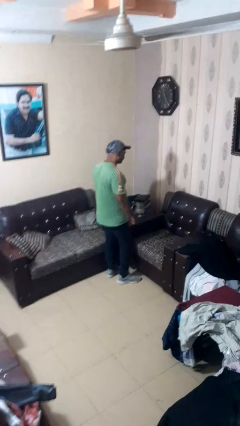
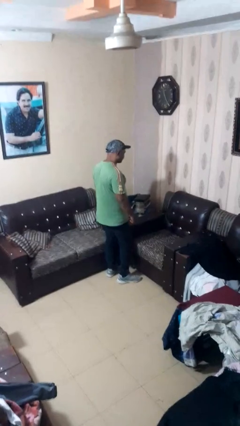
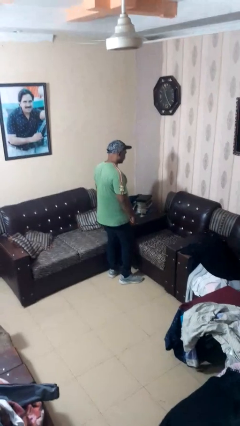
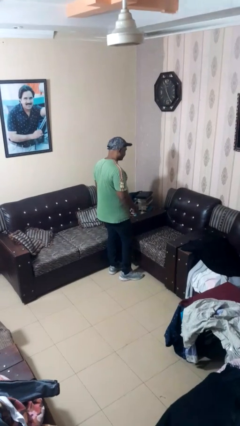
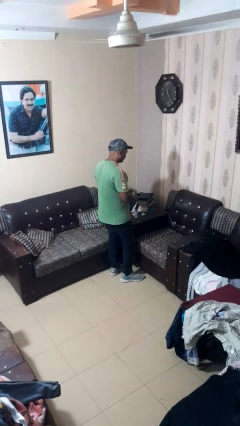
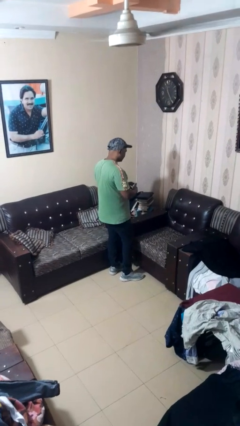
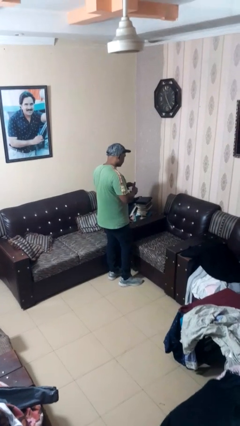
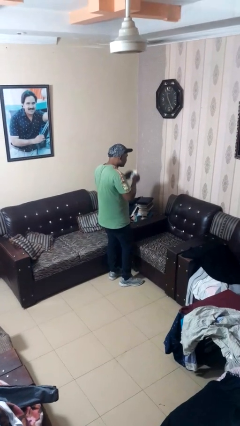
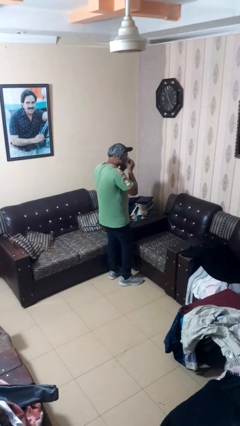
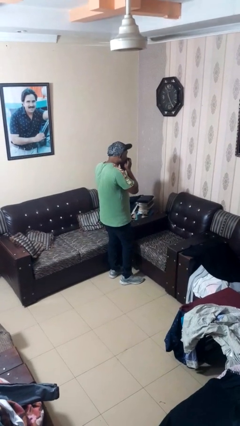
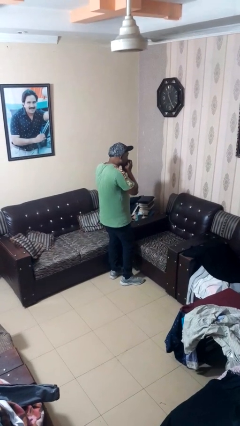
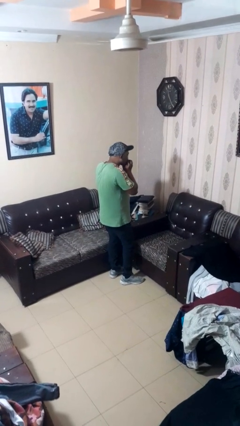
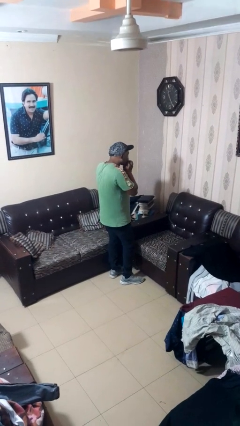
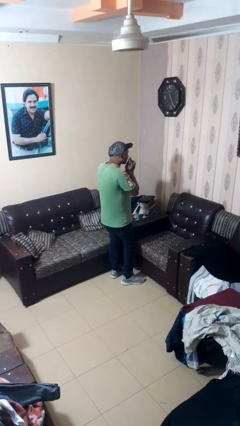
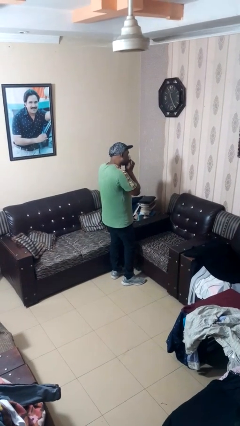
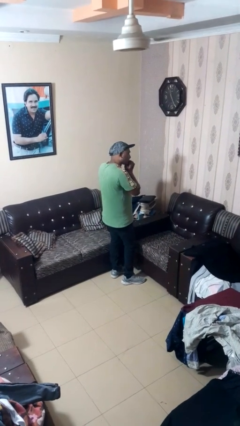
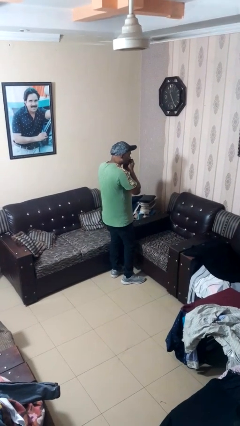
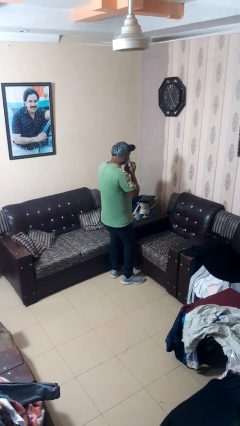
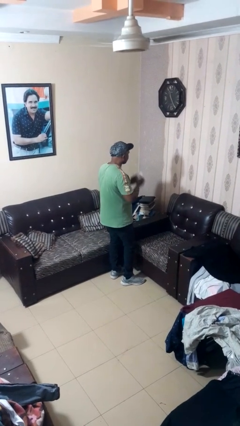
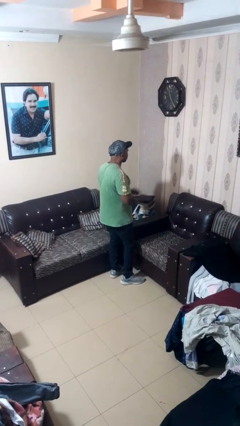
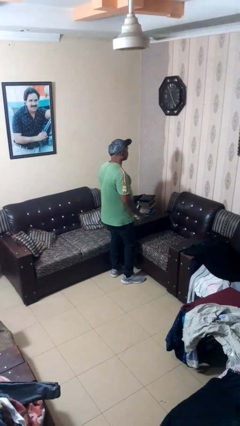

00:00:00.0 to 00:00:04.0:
person blows nose

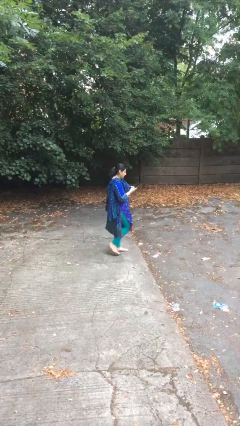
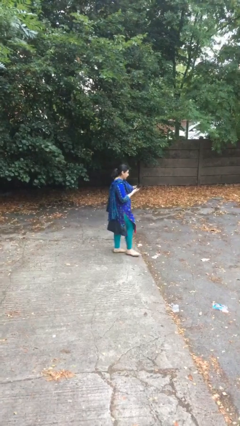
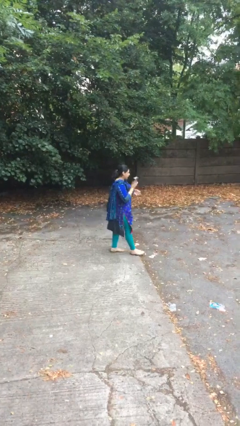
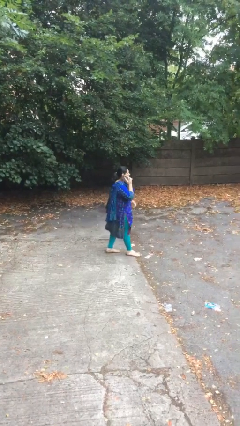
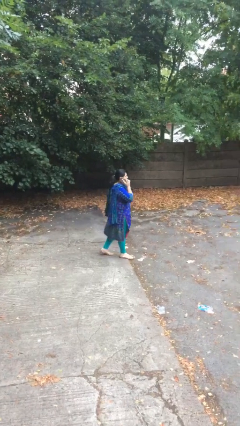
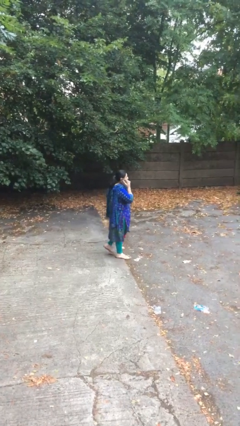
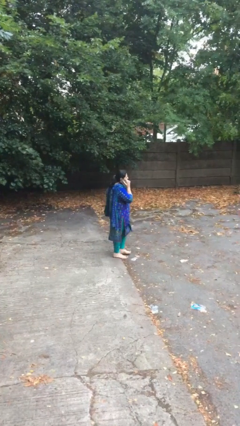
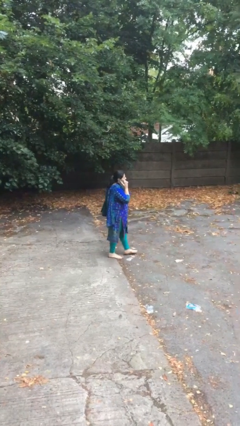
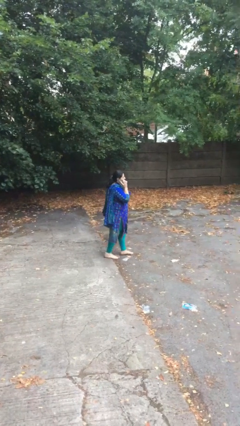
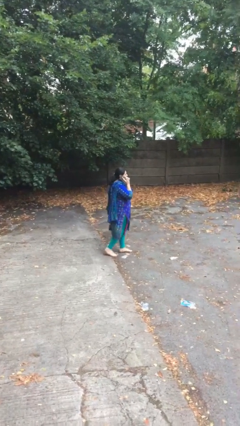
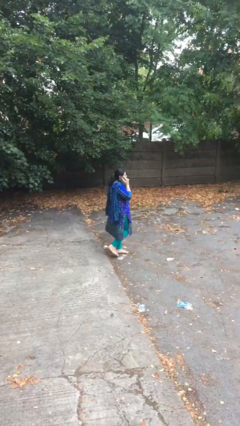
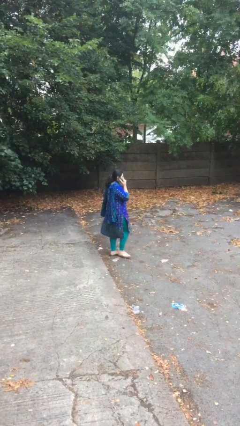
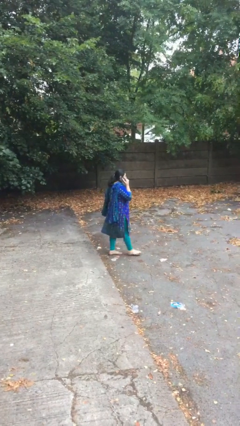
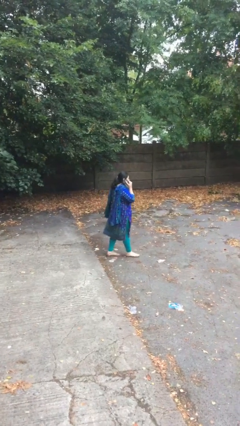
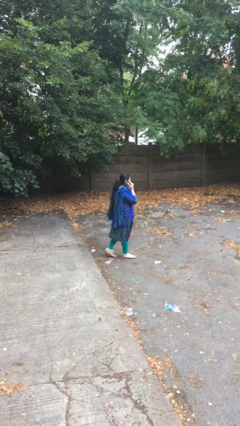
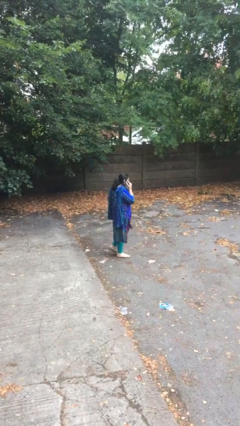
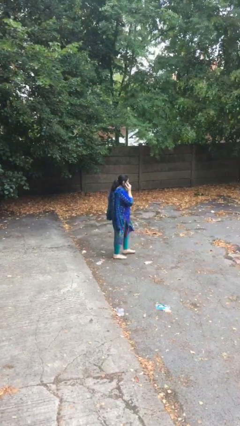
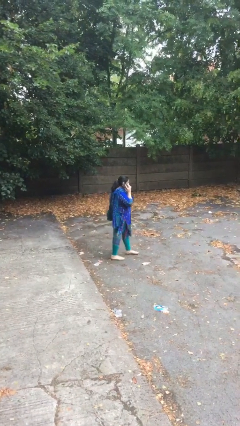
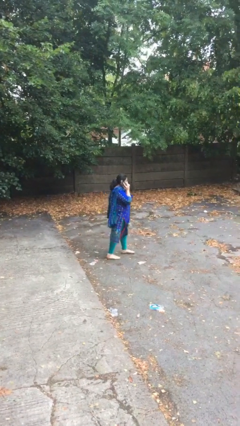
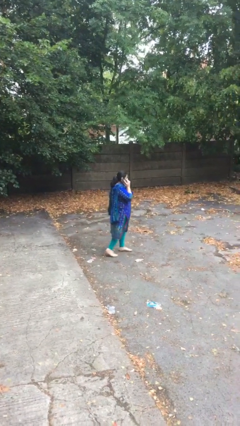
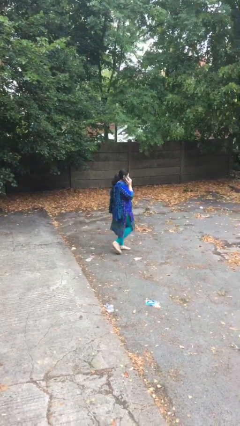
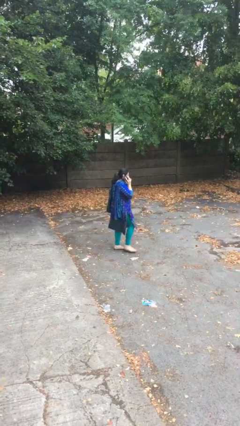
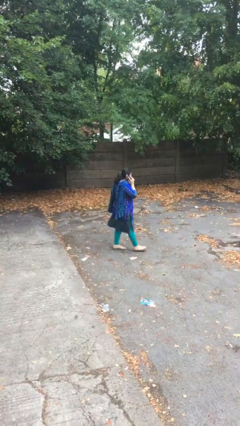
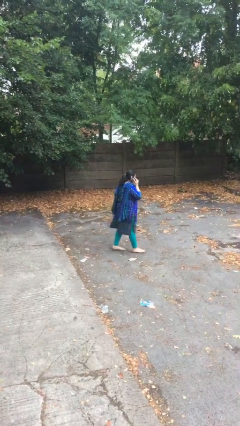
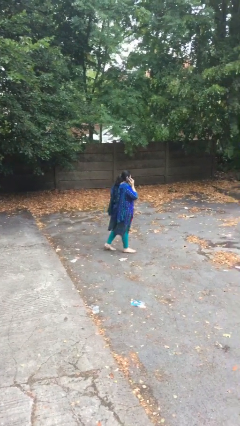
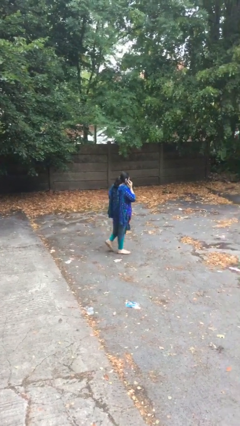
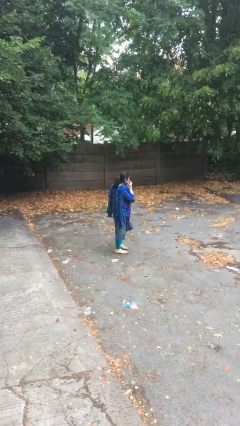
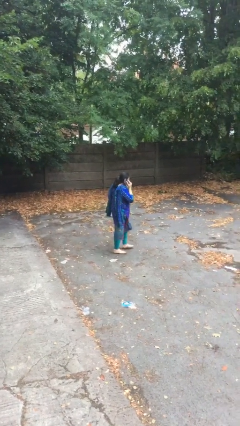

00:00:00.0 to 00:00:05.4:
person talks on phone

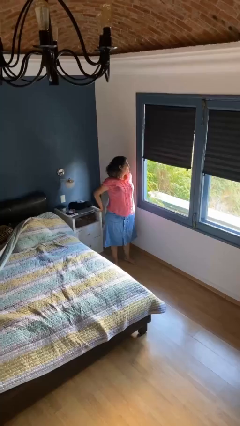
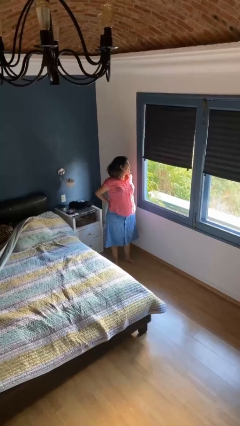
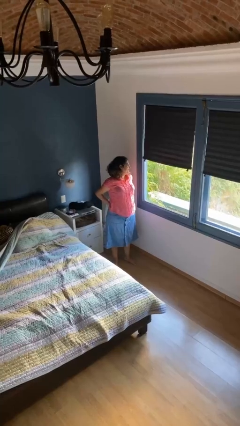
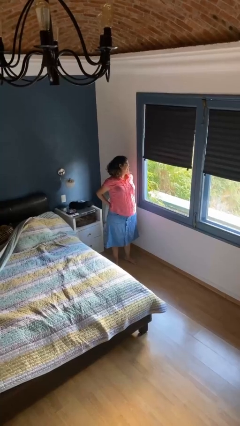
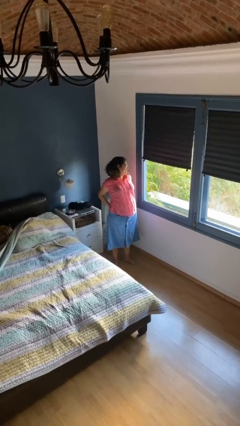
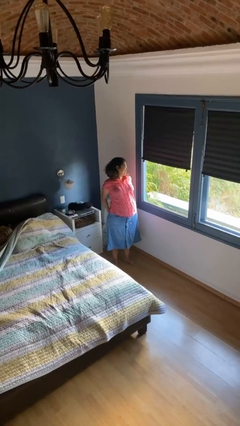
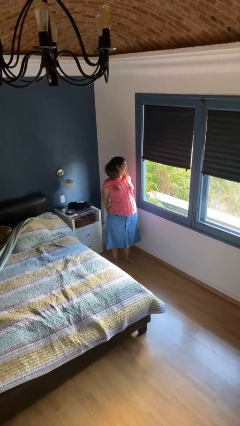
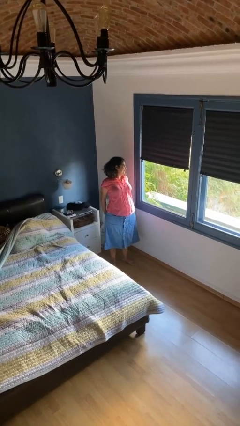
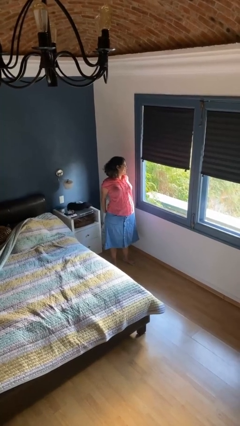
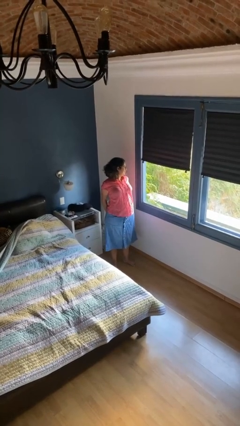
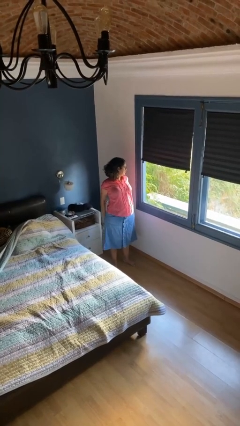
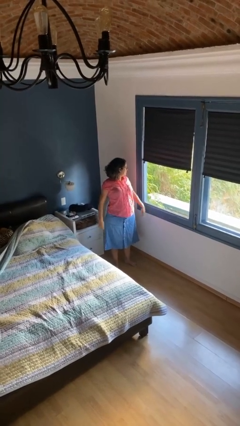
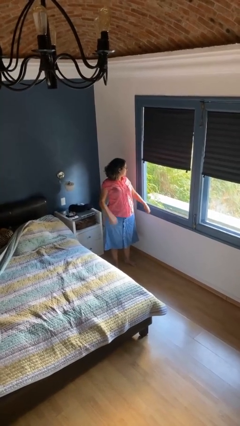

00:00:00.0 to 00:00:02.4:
person stretches back

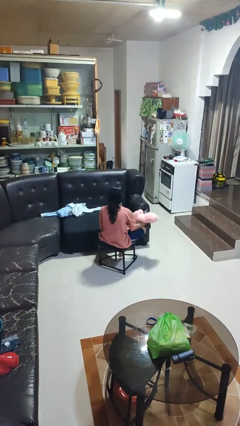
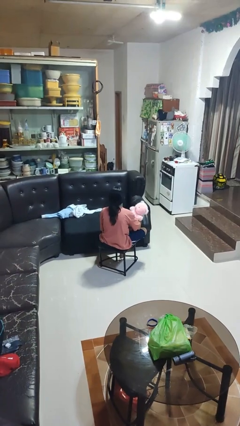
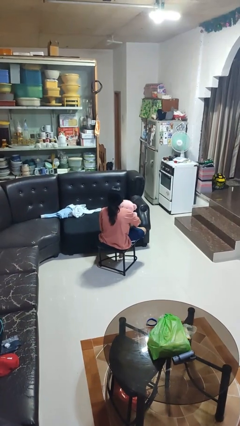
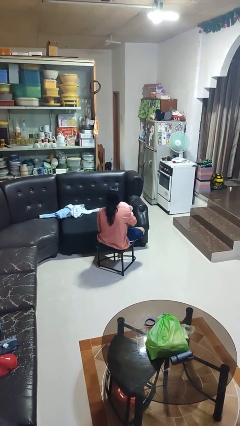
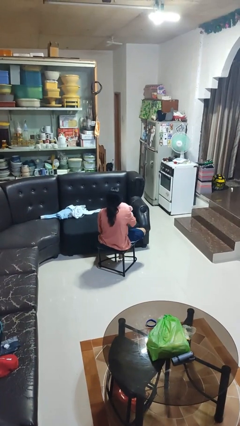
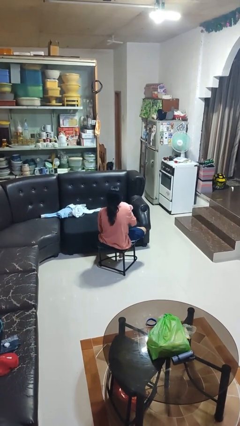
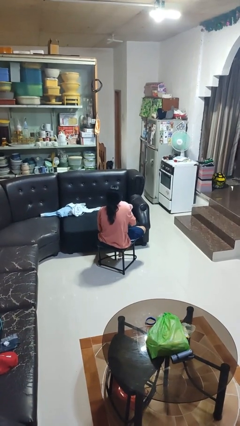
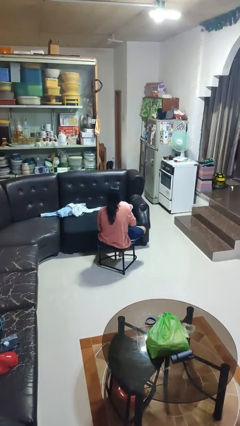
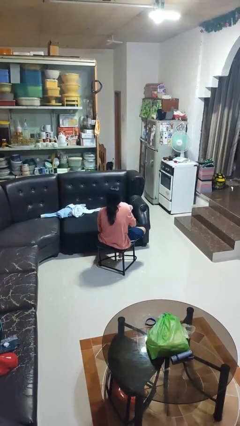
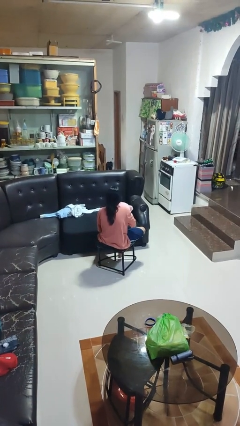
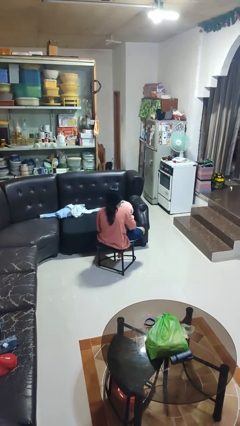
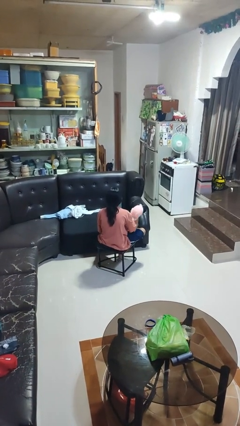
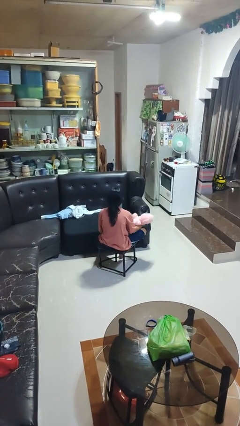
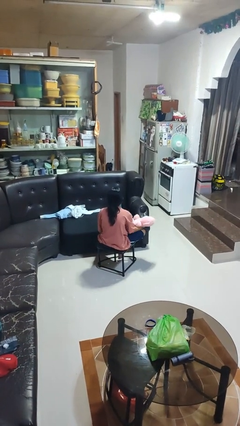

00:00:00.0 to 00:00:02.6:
person hugs stuffed animal

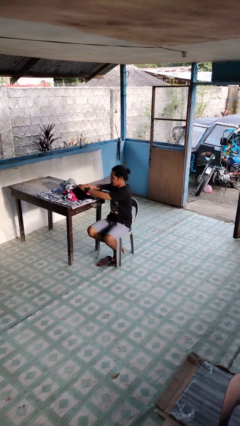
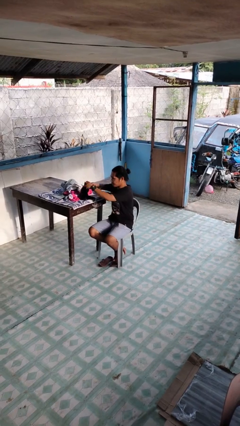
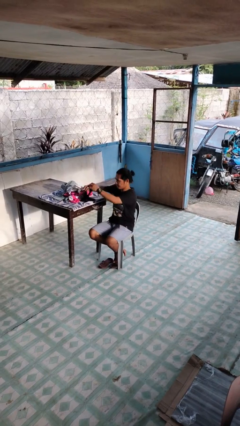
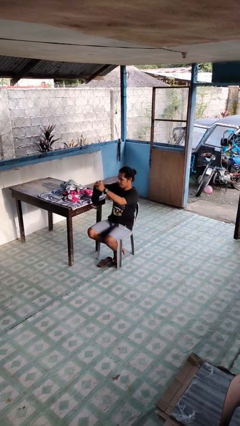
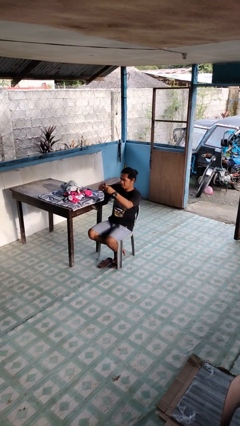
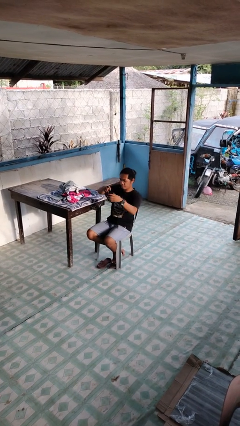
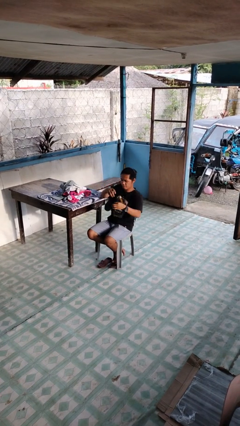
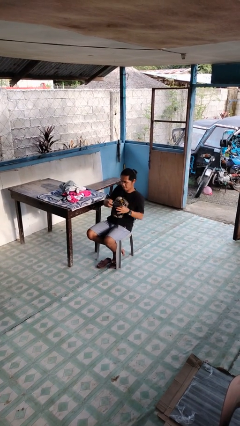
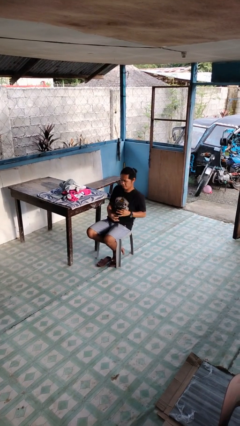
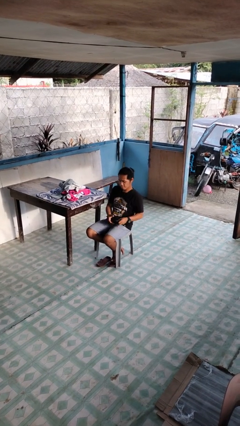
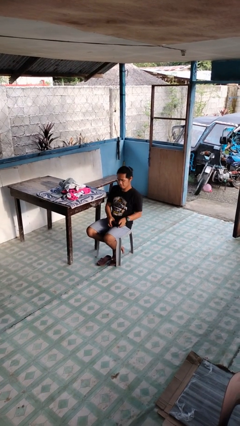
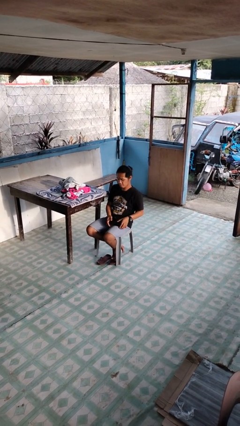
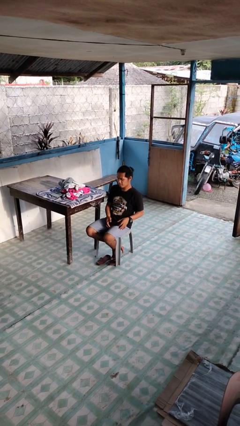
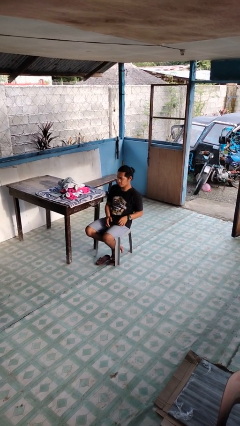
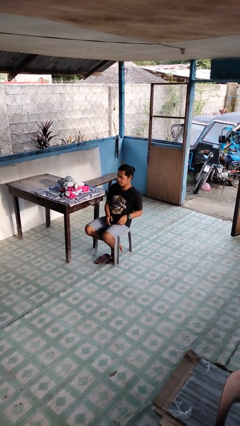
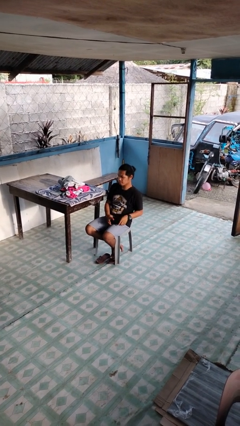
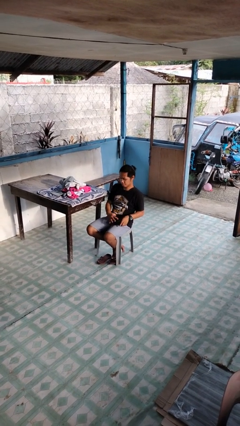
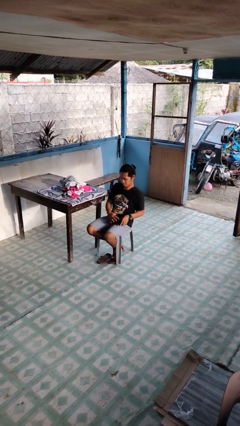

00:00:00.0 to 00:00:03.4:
person folds socks

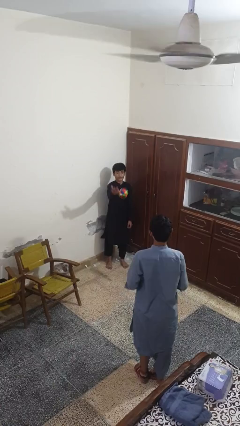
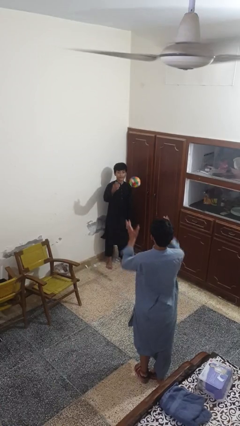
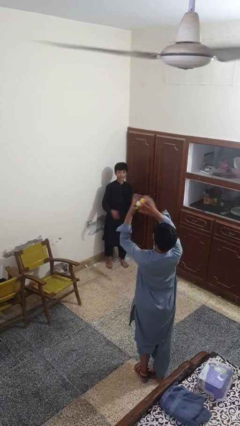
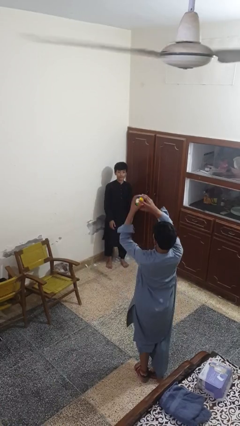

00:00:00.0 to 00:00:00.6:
person throws object to person
